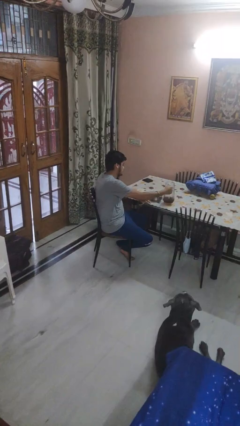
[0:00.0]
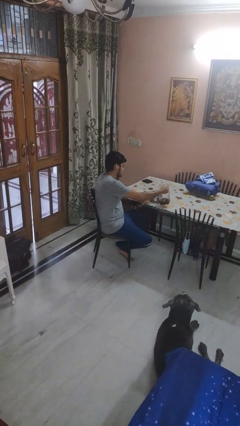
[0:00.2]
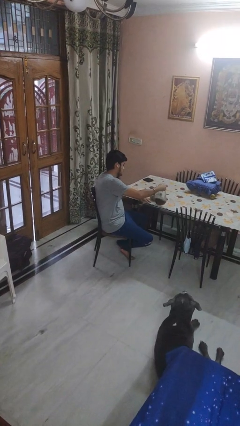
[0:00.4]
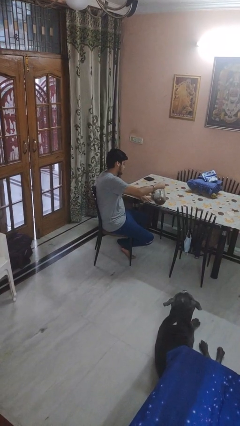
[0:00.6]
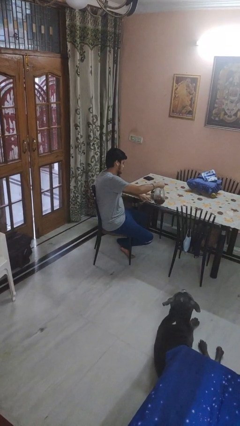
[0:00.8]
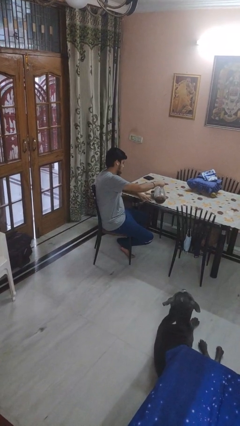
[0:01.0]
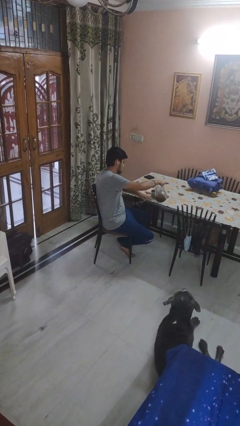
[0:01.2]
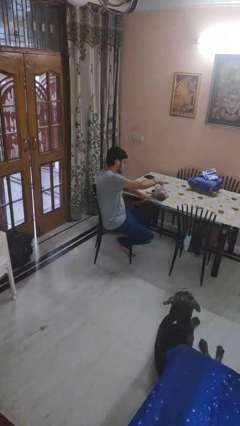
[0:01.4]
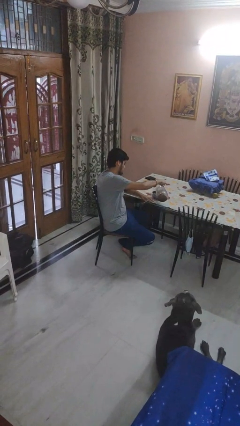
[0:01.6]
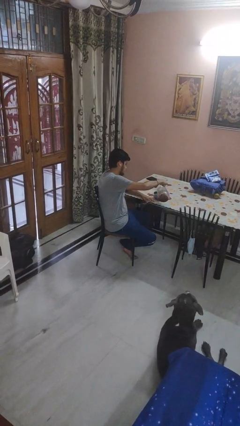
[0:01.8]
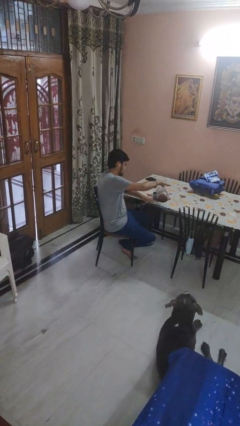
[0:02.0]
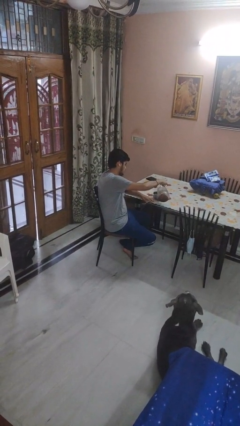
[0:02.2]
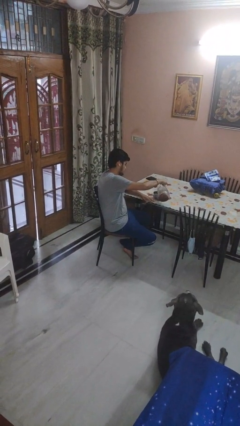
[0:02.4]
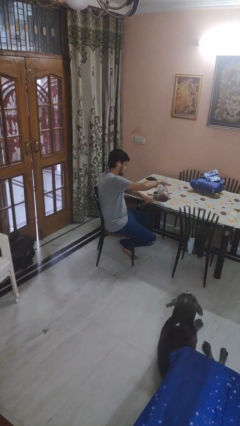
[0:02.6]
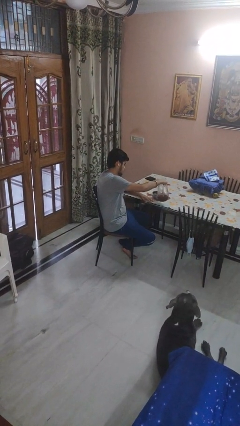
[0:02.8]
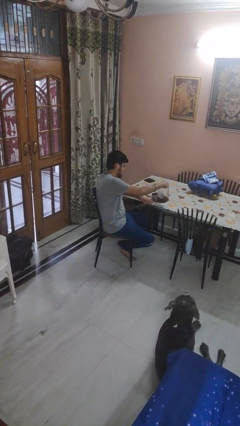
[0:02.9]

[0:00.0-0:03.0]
person pours into bowl

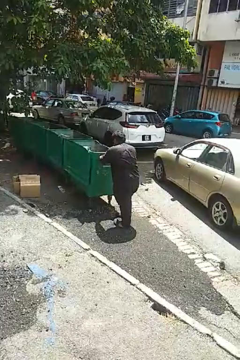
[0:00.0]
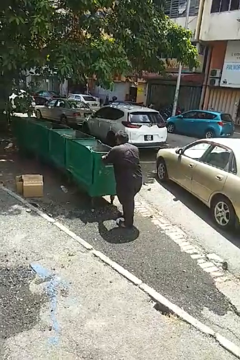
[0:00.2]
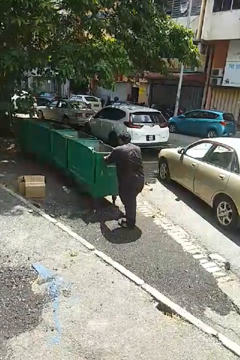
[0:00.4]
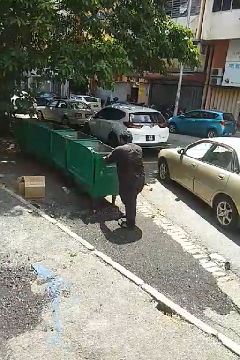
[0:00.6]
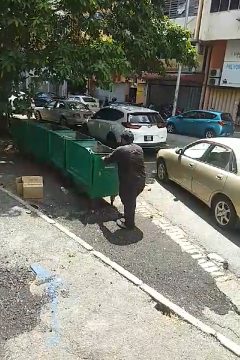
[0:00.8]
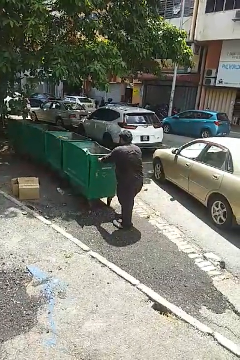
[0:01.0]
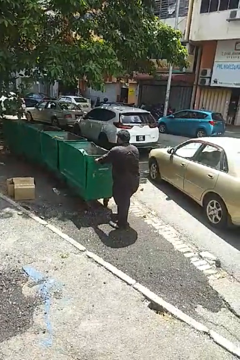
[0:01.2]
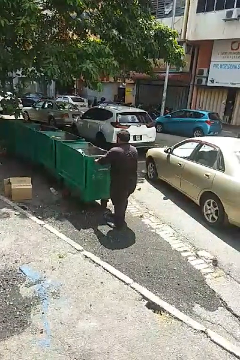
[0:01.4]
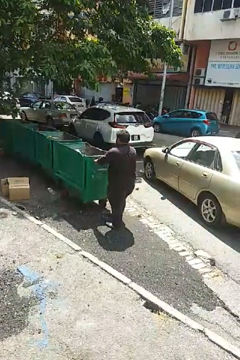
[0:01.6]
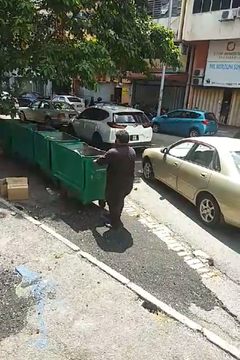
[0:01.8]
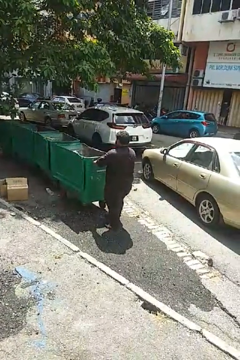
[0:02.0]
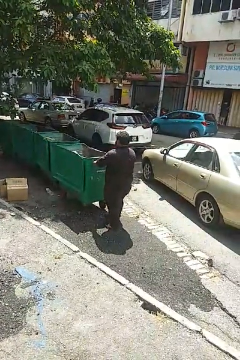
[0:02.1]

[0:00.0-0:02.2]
person pulls wheeled trashcan

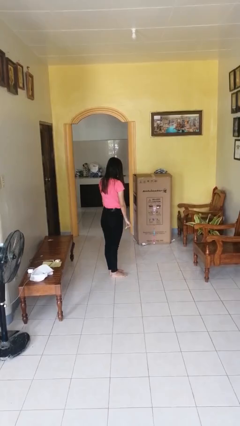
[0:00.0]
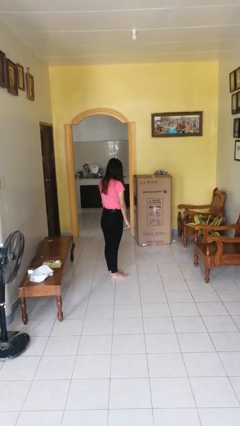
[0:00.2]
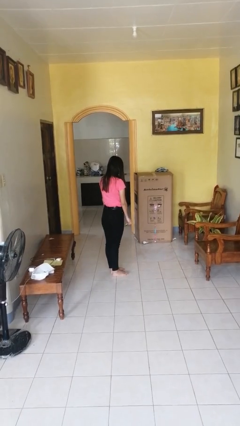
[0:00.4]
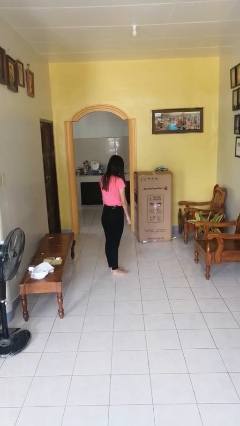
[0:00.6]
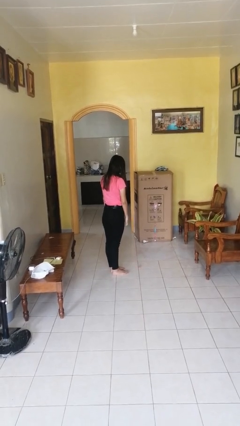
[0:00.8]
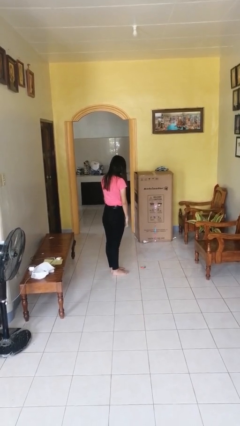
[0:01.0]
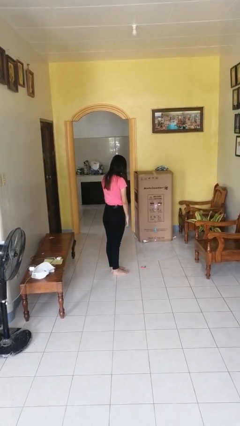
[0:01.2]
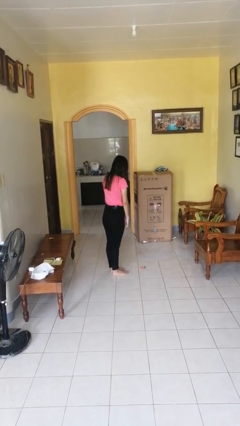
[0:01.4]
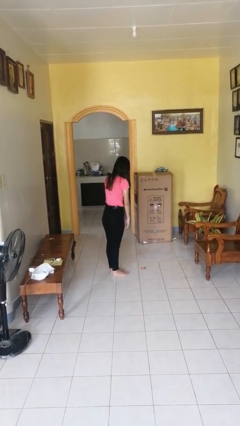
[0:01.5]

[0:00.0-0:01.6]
person throws object to ground

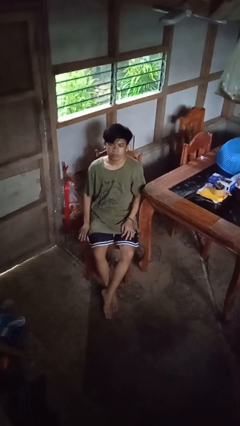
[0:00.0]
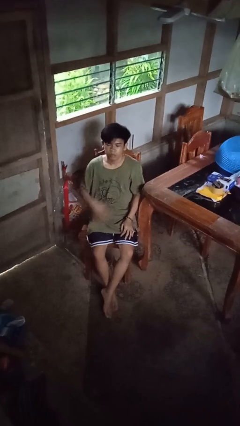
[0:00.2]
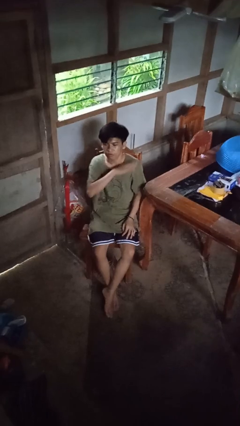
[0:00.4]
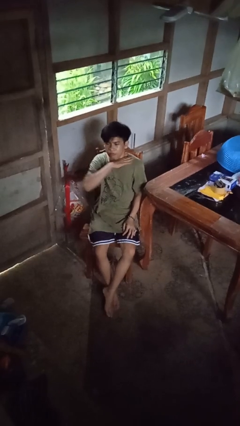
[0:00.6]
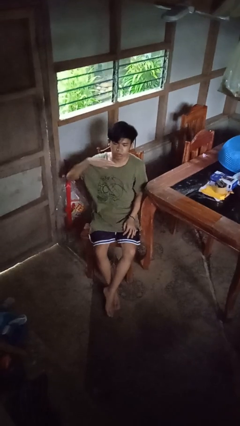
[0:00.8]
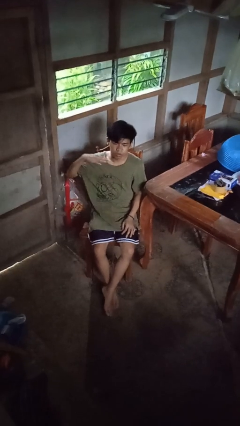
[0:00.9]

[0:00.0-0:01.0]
person gestures cut

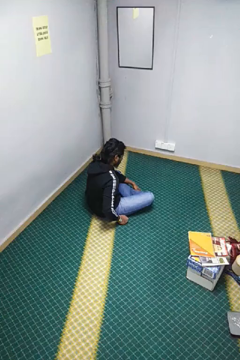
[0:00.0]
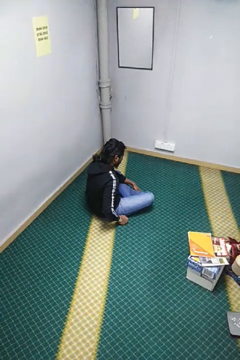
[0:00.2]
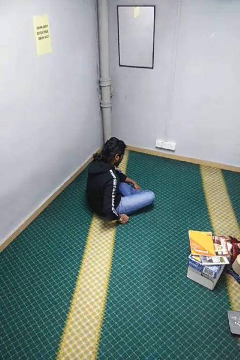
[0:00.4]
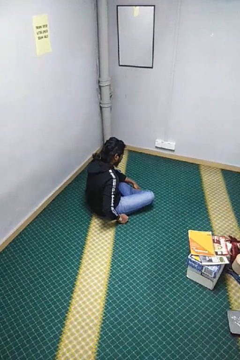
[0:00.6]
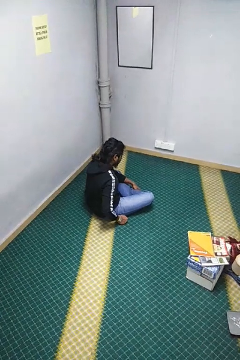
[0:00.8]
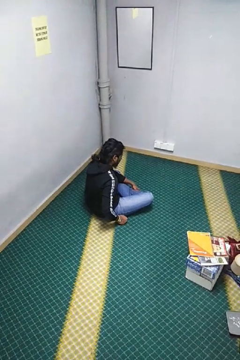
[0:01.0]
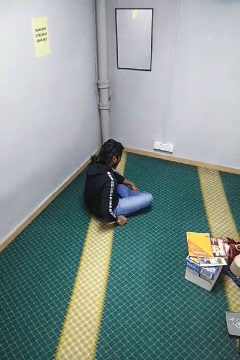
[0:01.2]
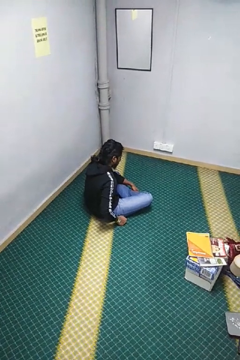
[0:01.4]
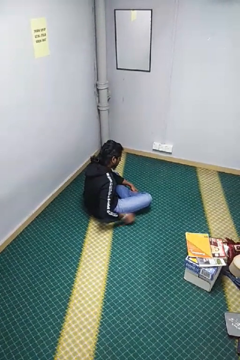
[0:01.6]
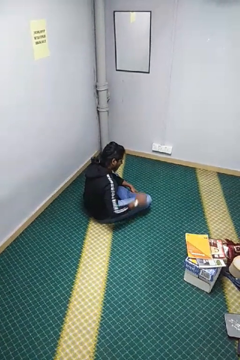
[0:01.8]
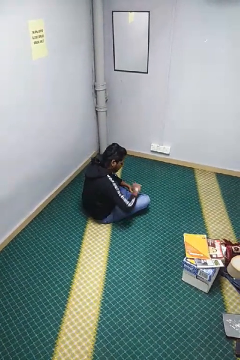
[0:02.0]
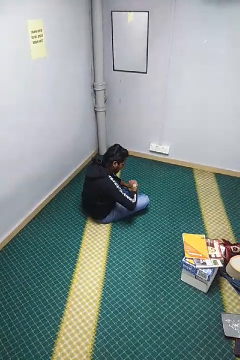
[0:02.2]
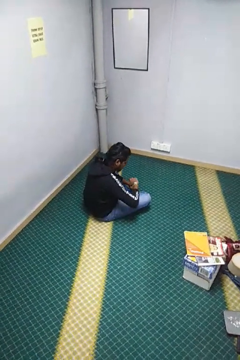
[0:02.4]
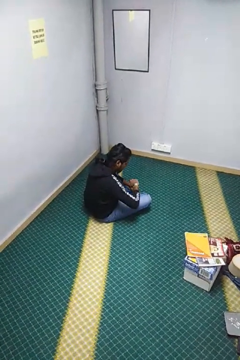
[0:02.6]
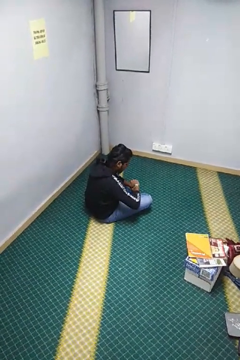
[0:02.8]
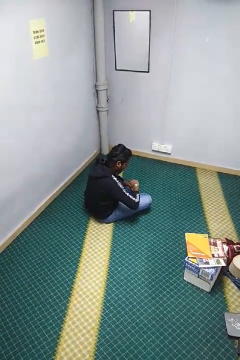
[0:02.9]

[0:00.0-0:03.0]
person looks at wristwatch

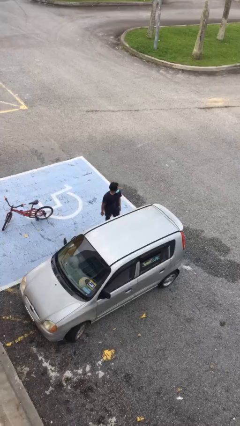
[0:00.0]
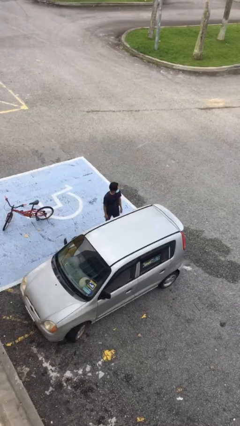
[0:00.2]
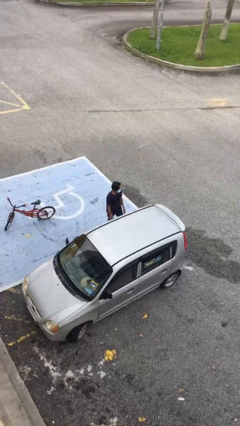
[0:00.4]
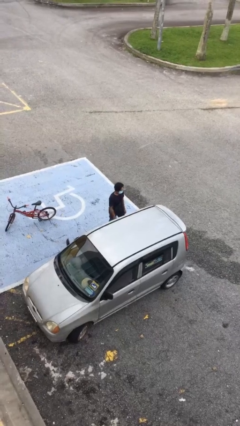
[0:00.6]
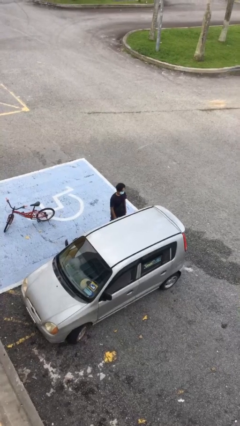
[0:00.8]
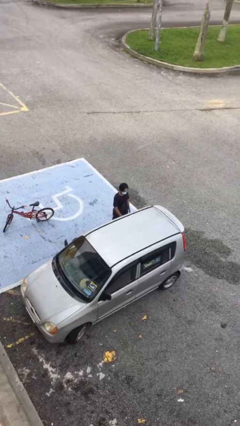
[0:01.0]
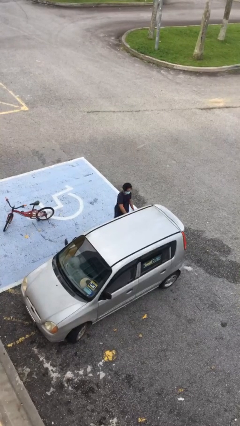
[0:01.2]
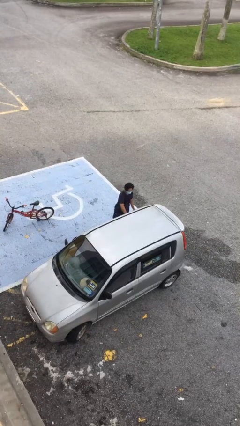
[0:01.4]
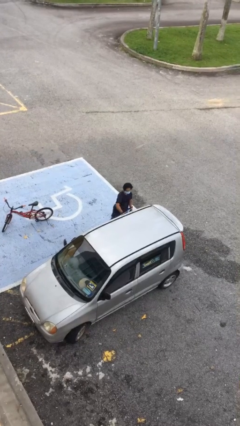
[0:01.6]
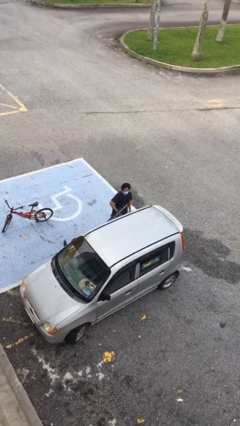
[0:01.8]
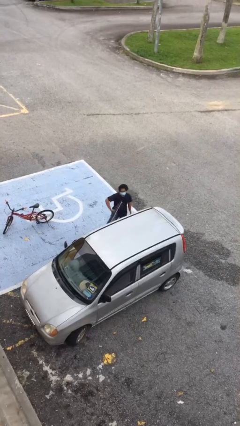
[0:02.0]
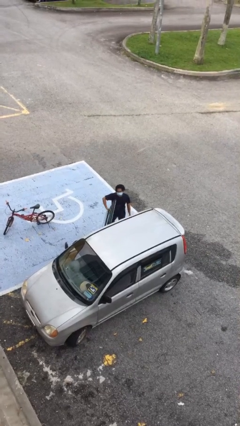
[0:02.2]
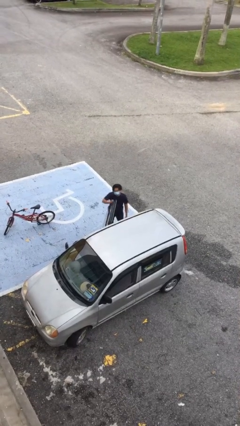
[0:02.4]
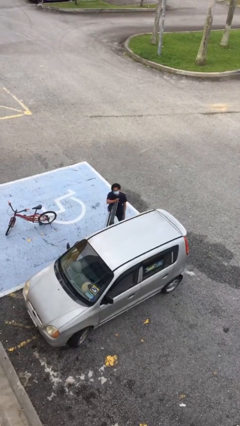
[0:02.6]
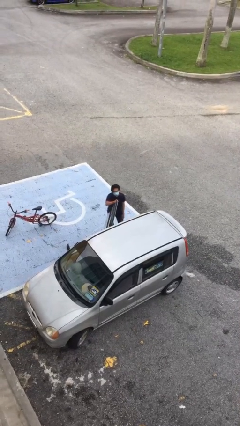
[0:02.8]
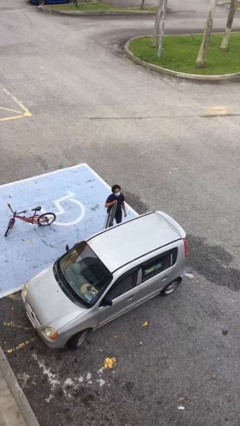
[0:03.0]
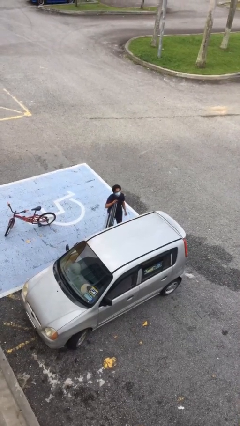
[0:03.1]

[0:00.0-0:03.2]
person opens car door

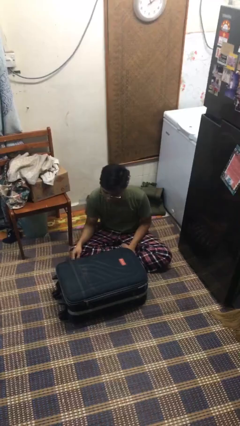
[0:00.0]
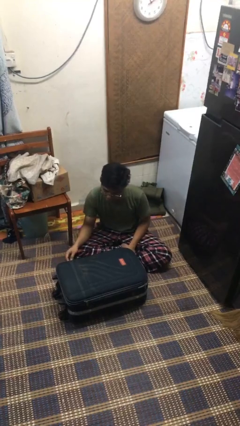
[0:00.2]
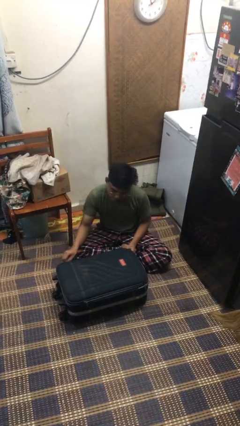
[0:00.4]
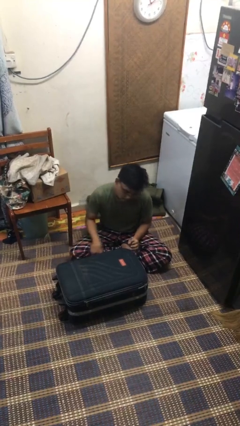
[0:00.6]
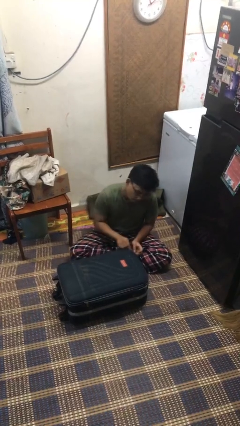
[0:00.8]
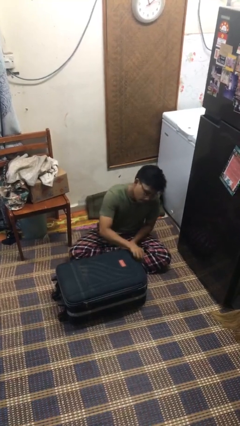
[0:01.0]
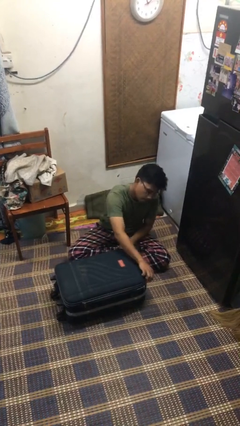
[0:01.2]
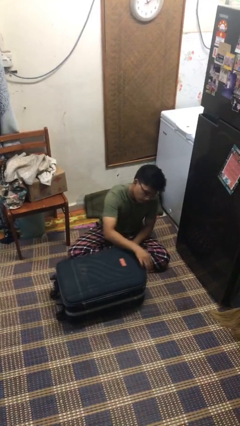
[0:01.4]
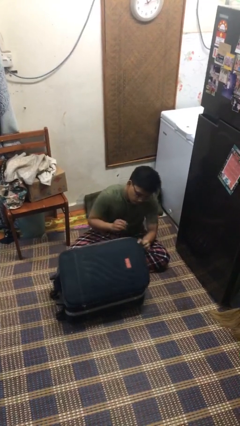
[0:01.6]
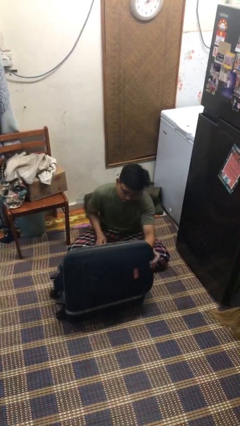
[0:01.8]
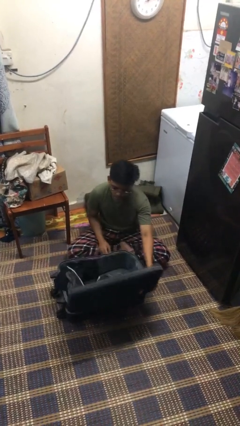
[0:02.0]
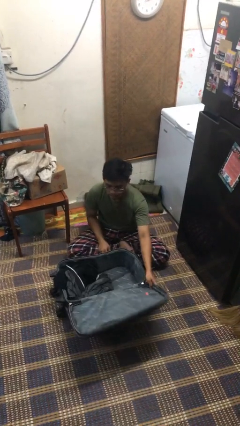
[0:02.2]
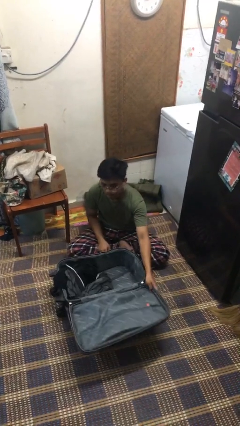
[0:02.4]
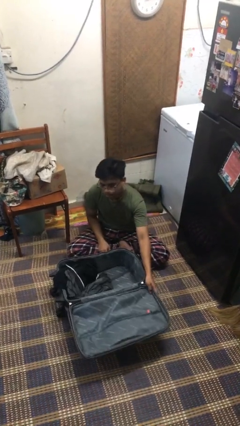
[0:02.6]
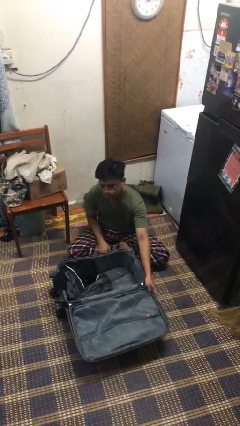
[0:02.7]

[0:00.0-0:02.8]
person opens suitcase

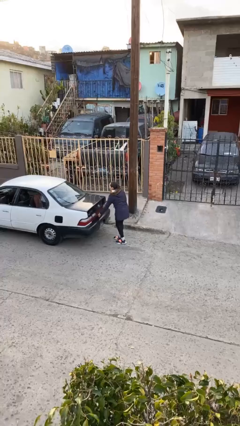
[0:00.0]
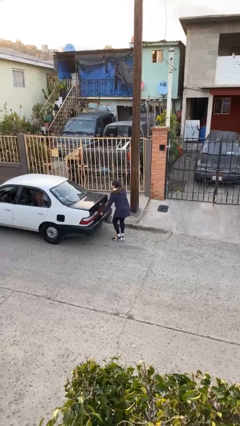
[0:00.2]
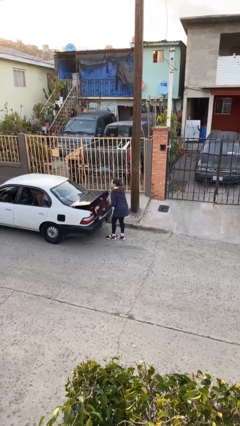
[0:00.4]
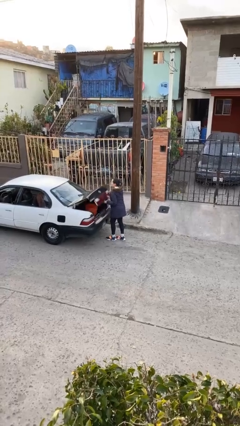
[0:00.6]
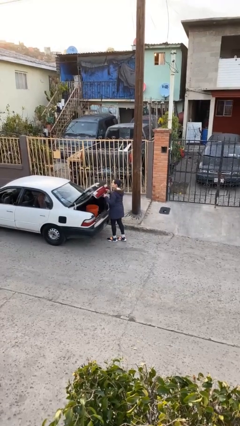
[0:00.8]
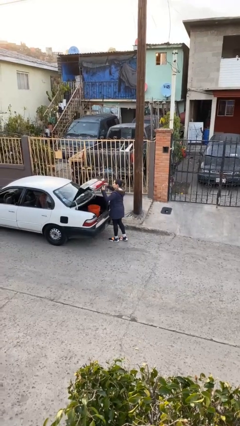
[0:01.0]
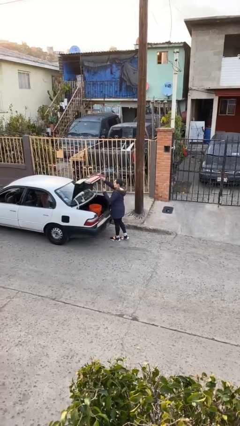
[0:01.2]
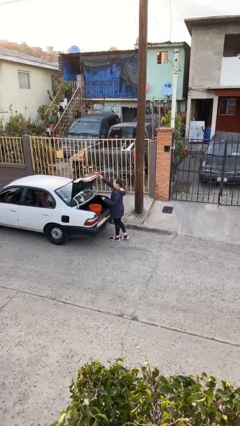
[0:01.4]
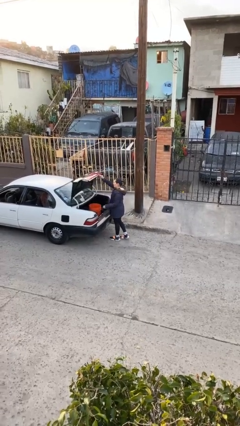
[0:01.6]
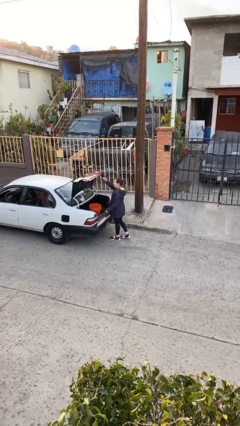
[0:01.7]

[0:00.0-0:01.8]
person opens car trunk
